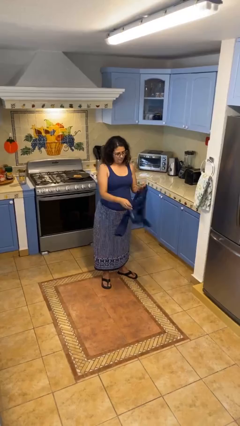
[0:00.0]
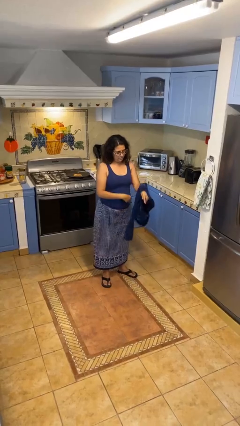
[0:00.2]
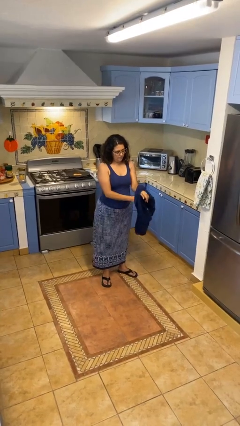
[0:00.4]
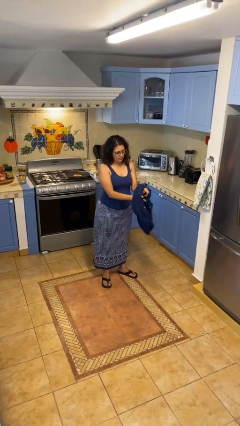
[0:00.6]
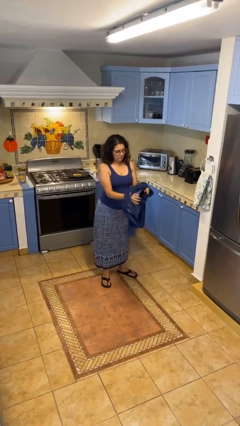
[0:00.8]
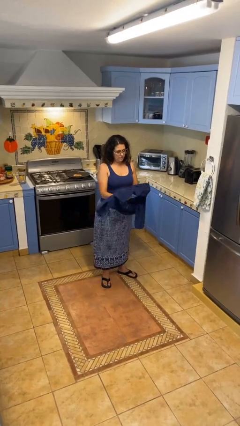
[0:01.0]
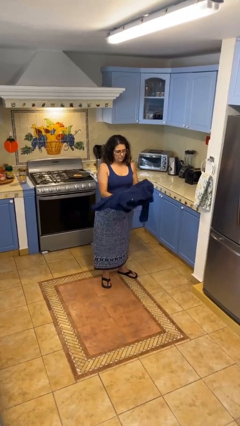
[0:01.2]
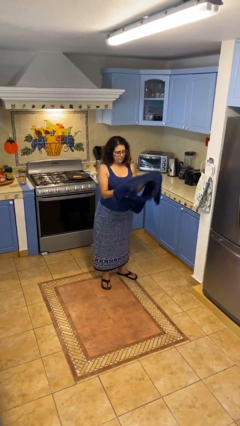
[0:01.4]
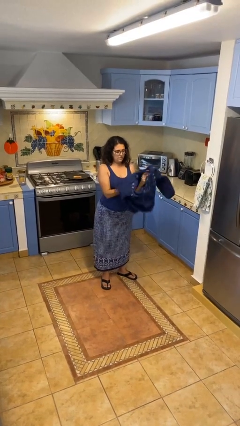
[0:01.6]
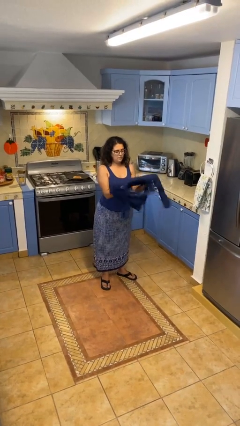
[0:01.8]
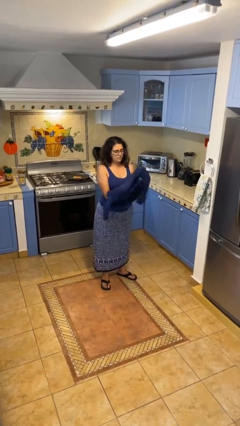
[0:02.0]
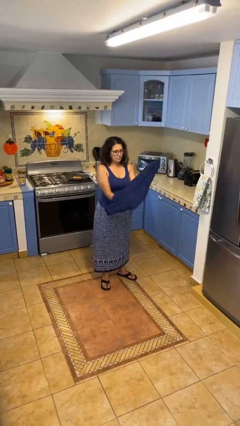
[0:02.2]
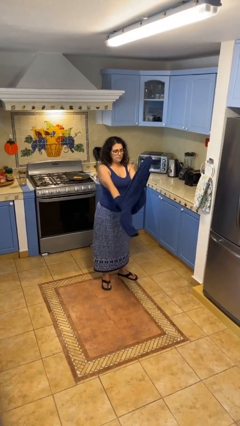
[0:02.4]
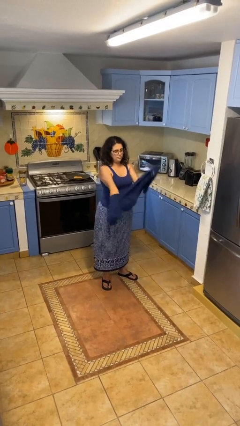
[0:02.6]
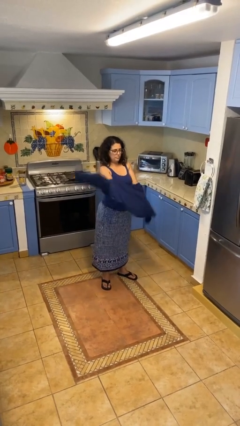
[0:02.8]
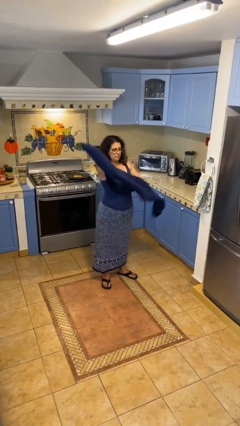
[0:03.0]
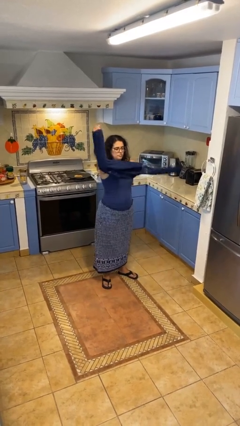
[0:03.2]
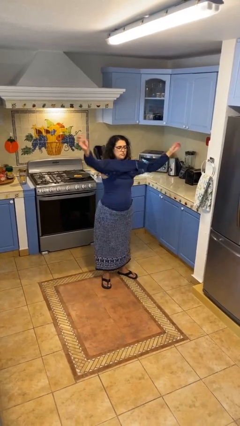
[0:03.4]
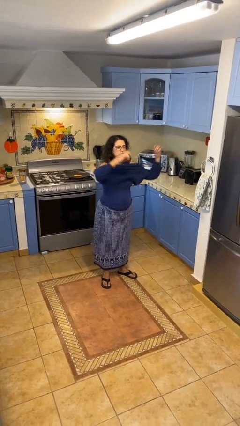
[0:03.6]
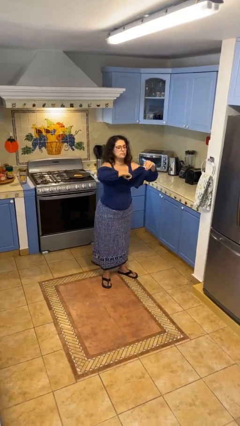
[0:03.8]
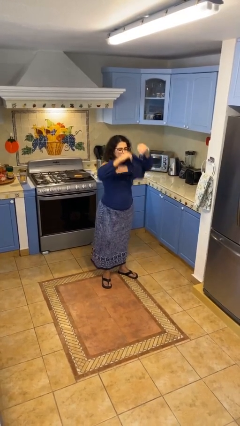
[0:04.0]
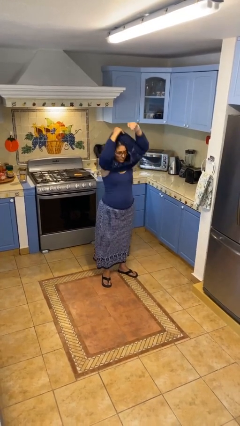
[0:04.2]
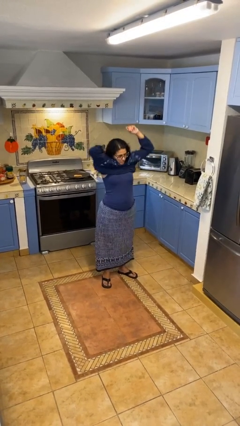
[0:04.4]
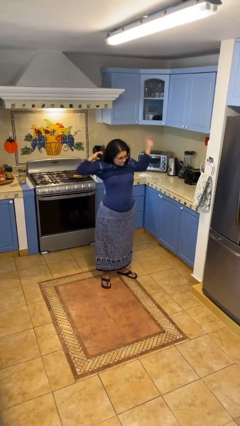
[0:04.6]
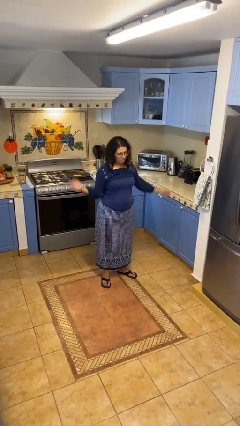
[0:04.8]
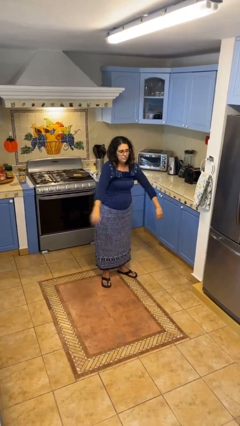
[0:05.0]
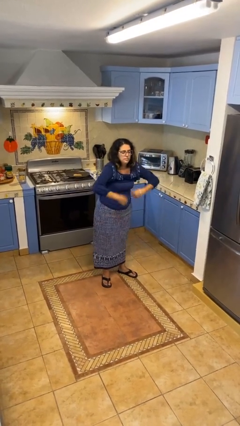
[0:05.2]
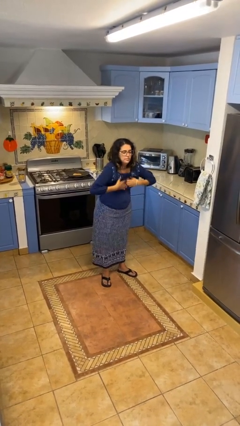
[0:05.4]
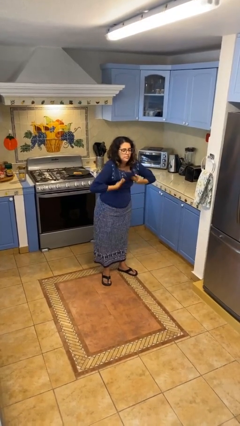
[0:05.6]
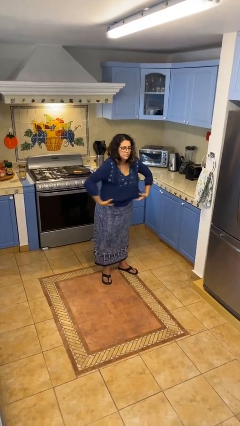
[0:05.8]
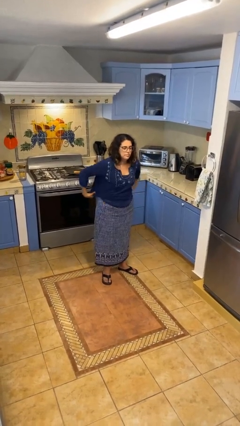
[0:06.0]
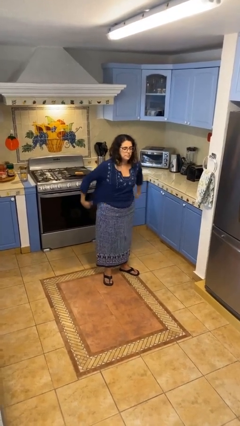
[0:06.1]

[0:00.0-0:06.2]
person puts on shirt

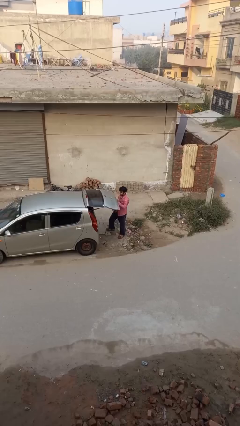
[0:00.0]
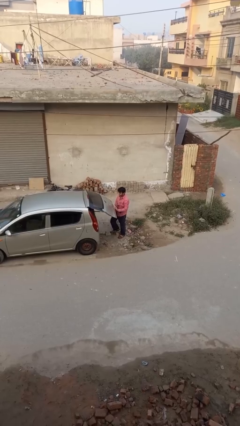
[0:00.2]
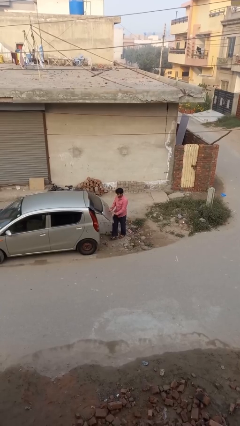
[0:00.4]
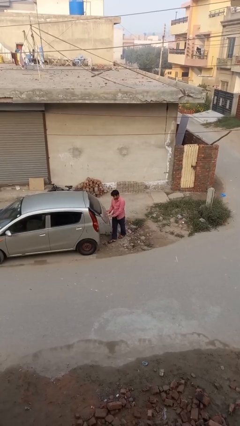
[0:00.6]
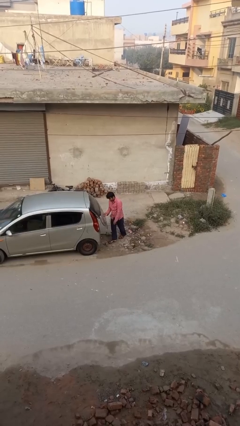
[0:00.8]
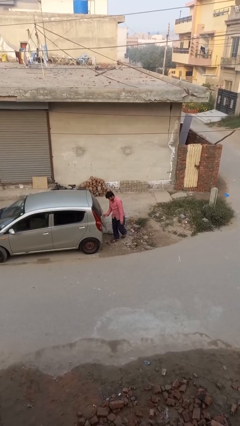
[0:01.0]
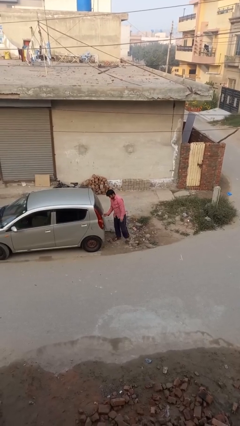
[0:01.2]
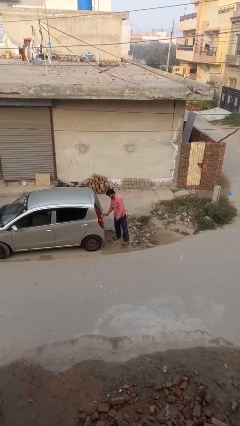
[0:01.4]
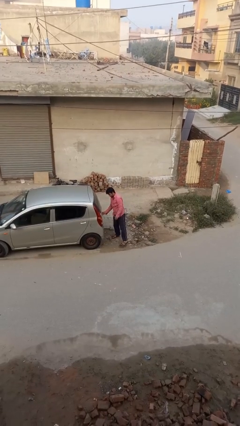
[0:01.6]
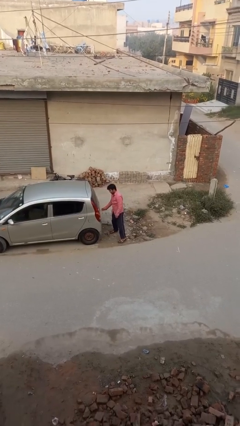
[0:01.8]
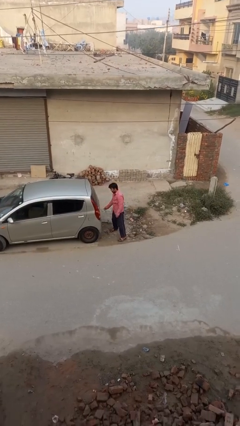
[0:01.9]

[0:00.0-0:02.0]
person closes car trunk

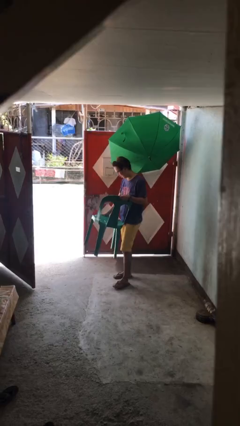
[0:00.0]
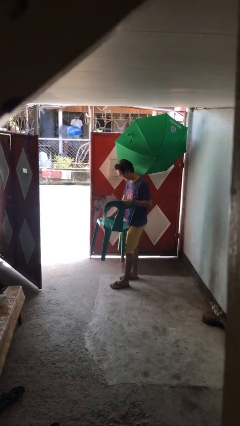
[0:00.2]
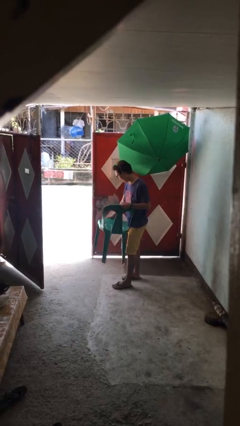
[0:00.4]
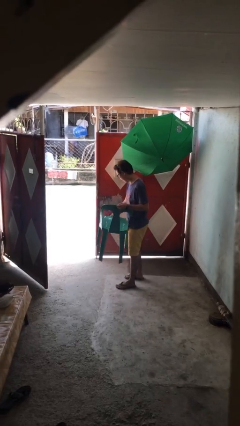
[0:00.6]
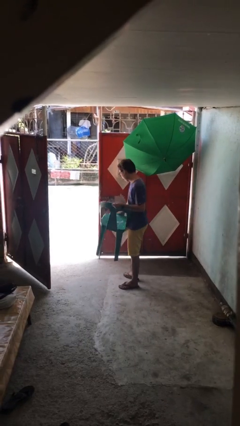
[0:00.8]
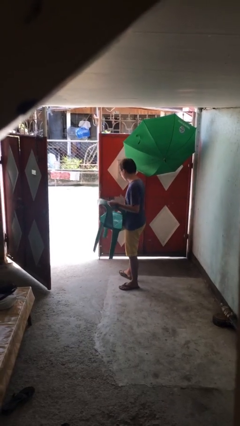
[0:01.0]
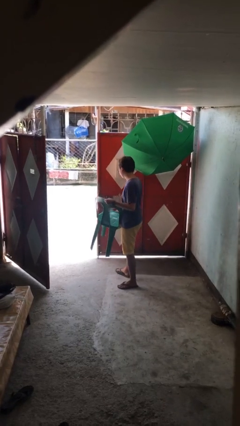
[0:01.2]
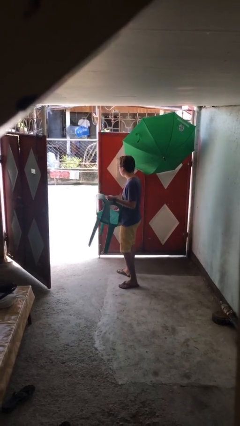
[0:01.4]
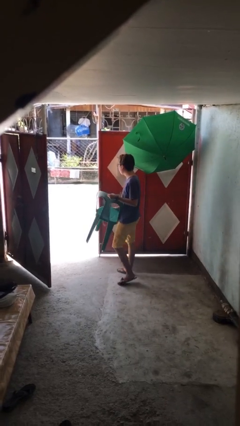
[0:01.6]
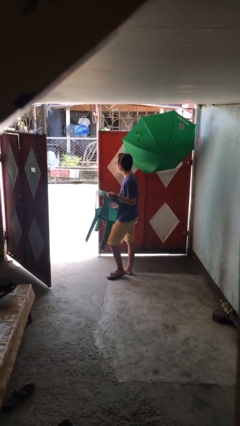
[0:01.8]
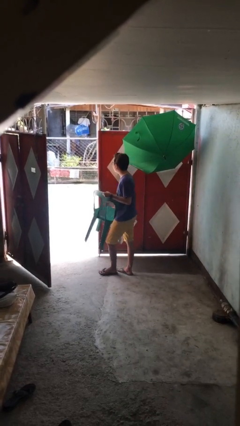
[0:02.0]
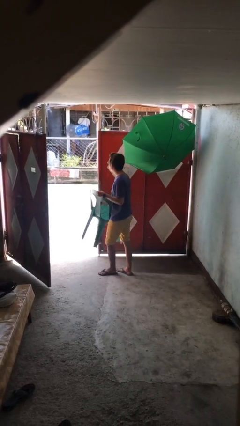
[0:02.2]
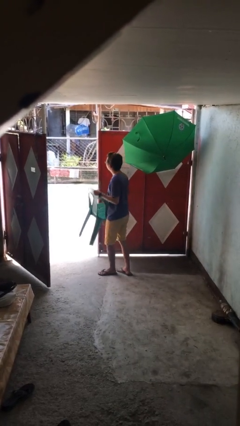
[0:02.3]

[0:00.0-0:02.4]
person carries heavy object

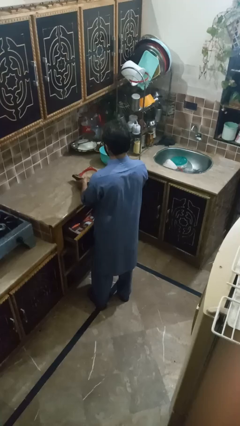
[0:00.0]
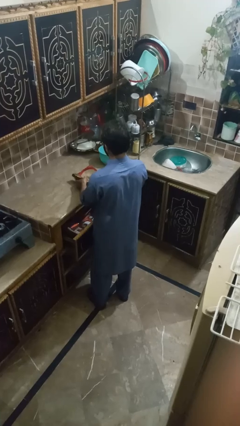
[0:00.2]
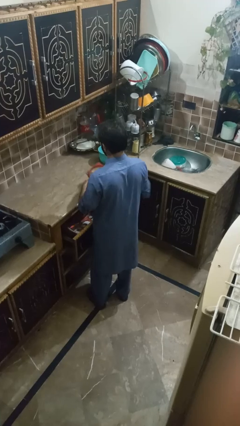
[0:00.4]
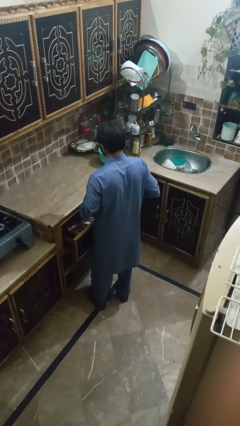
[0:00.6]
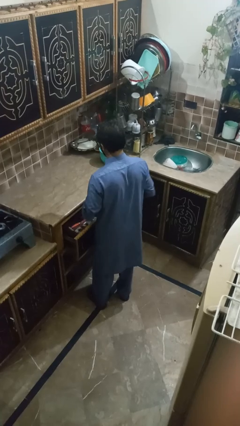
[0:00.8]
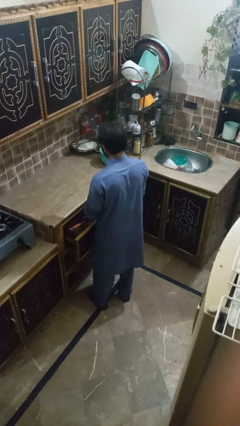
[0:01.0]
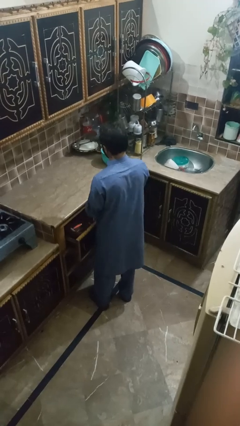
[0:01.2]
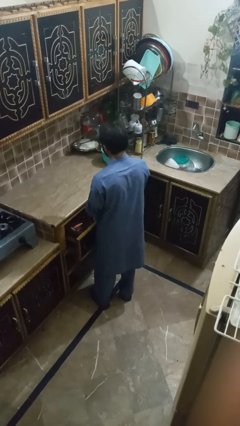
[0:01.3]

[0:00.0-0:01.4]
person puts object into kitchen drawer

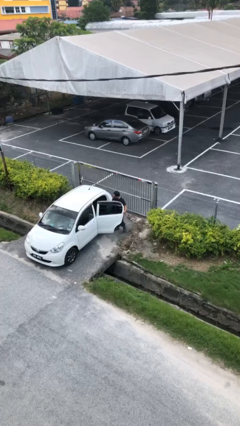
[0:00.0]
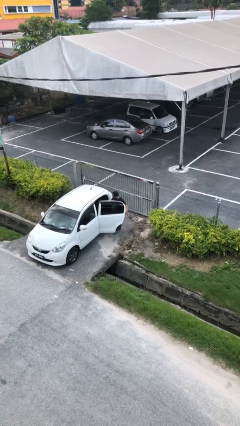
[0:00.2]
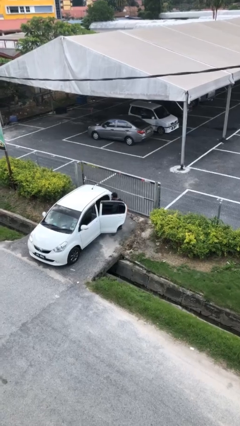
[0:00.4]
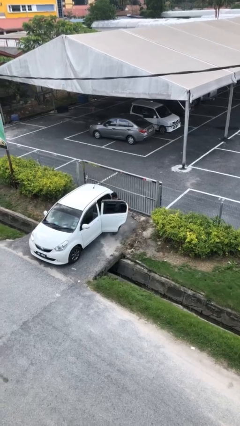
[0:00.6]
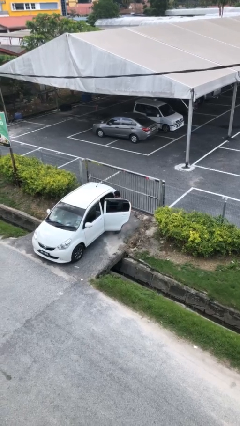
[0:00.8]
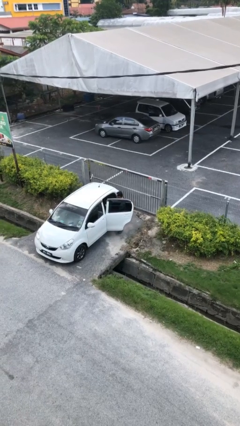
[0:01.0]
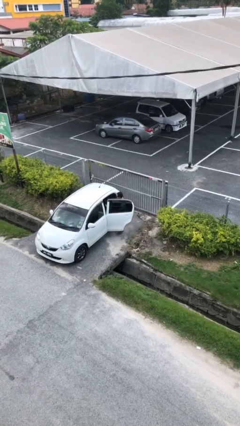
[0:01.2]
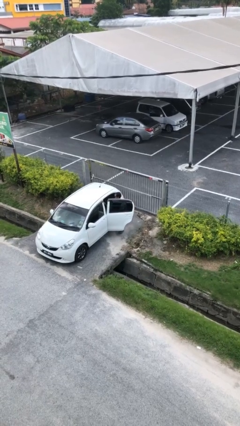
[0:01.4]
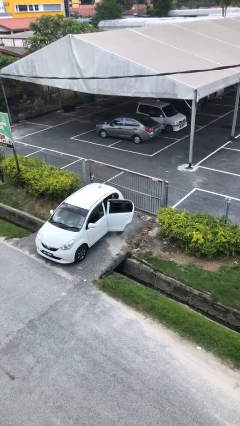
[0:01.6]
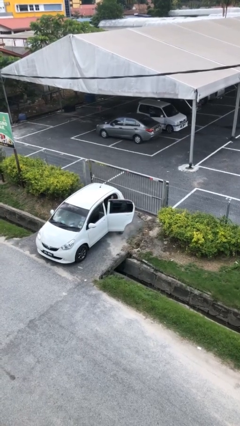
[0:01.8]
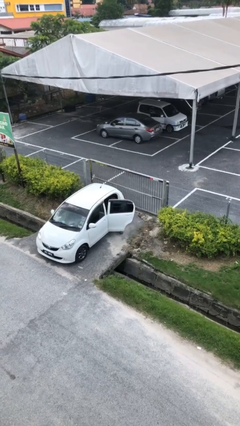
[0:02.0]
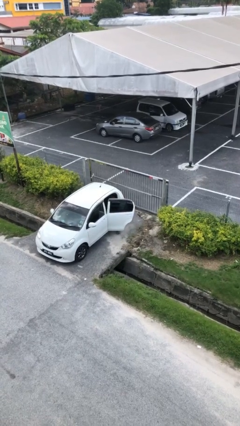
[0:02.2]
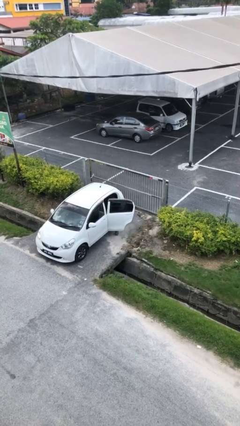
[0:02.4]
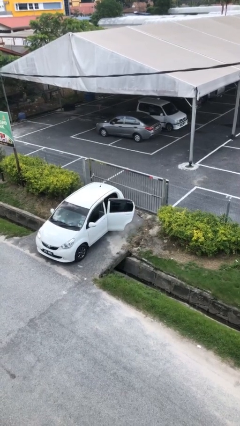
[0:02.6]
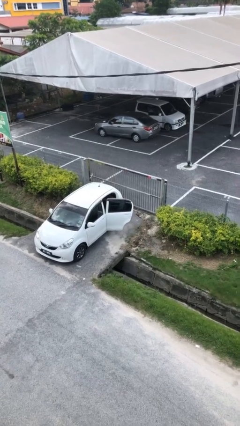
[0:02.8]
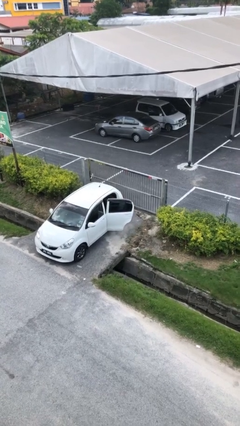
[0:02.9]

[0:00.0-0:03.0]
person enters car

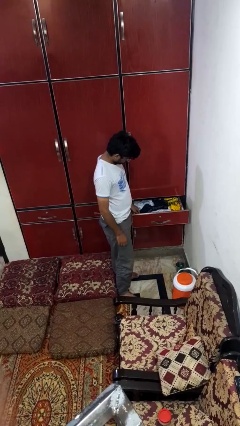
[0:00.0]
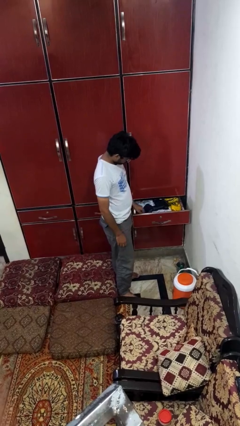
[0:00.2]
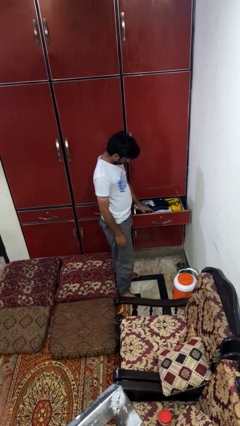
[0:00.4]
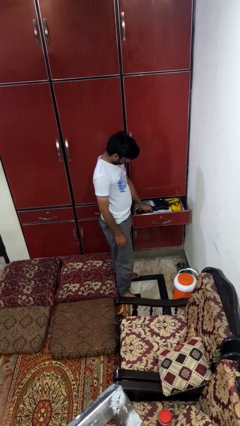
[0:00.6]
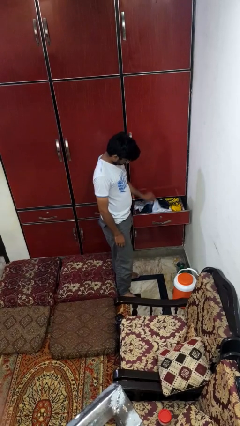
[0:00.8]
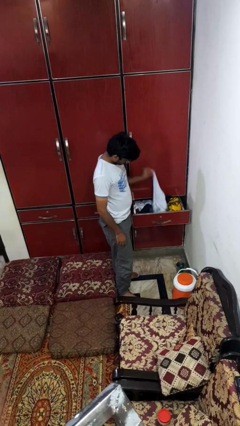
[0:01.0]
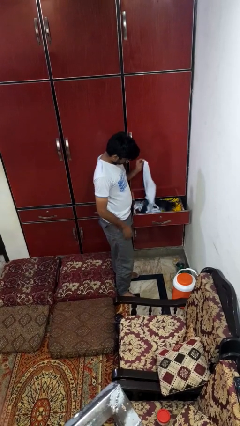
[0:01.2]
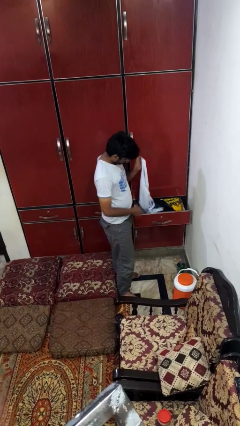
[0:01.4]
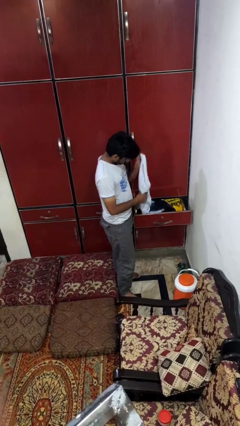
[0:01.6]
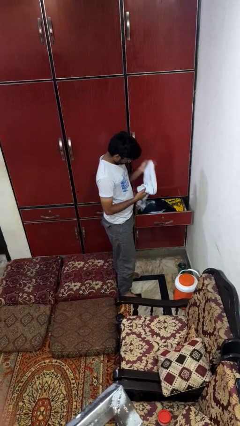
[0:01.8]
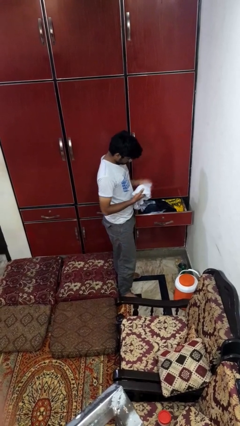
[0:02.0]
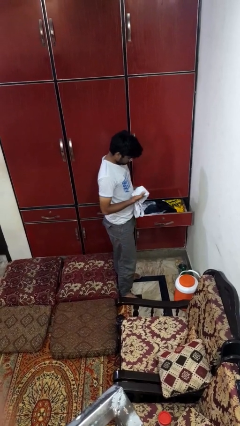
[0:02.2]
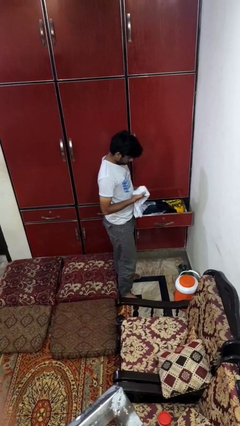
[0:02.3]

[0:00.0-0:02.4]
person takes clothes from dresser
